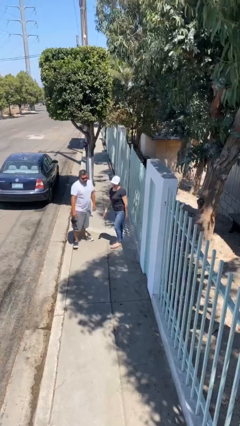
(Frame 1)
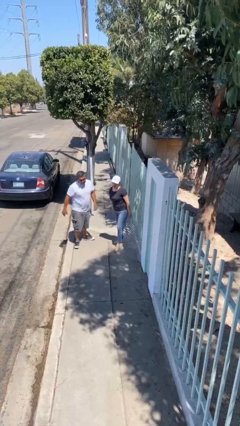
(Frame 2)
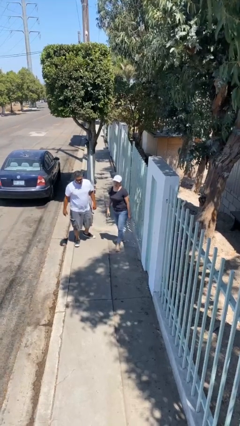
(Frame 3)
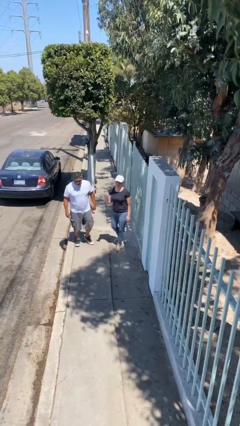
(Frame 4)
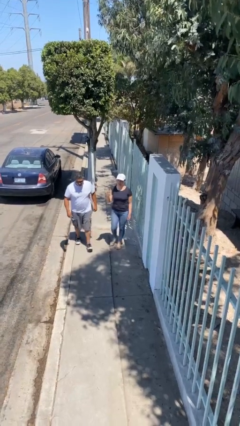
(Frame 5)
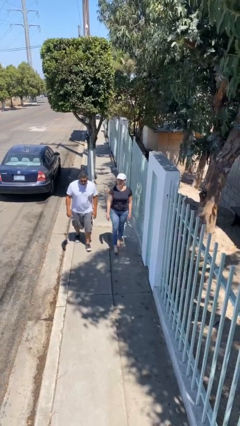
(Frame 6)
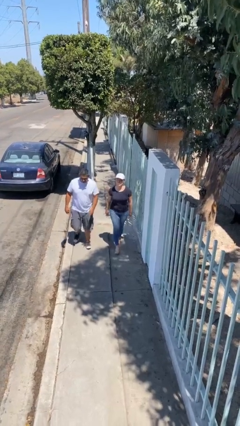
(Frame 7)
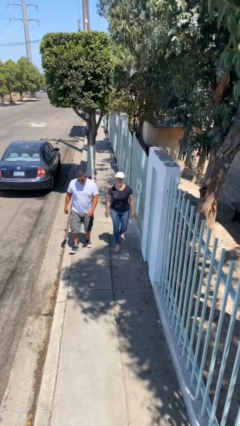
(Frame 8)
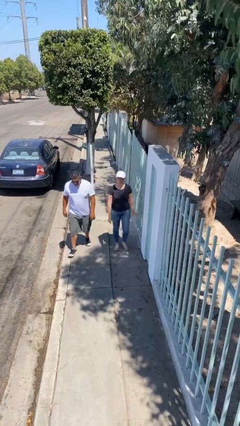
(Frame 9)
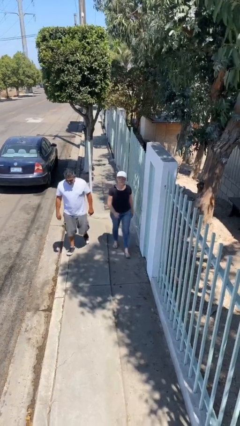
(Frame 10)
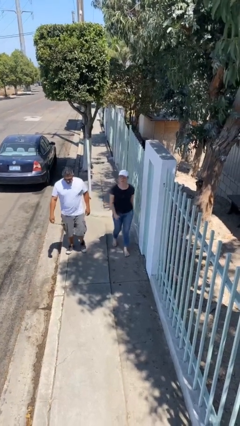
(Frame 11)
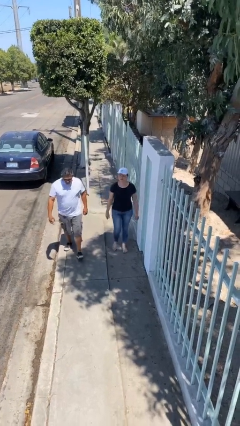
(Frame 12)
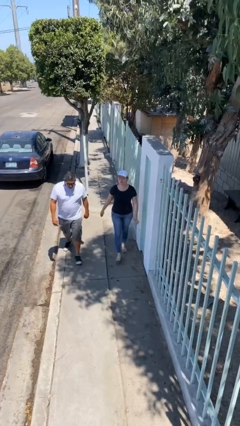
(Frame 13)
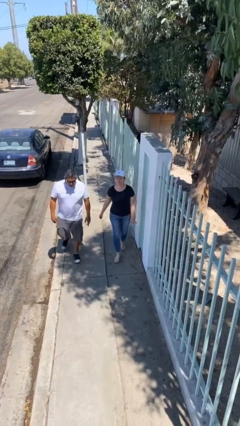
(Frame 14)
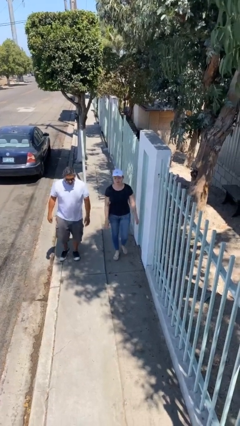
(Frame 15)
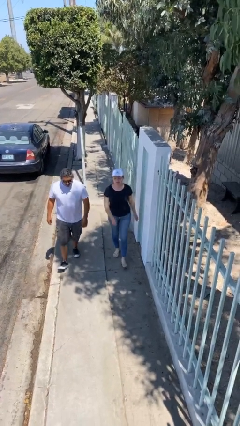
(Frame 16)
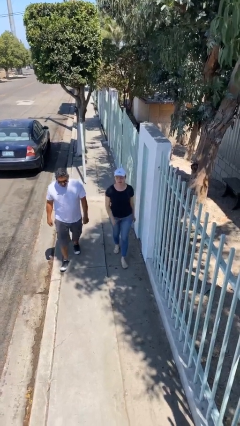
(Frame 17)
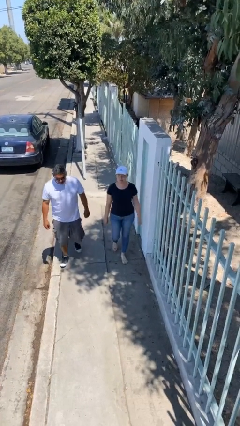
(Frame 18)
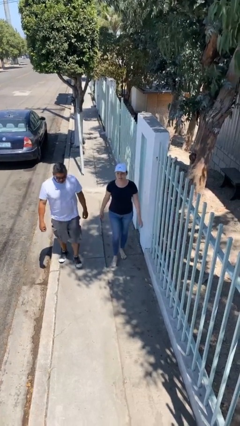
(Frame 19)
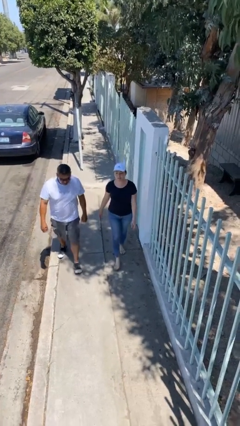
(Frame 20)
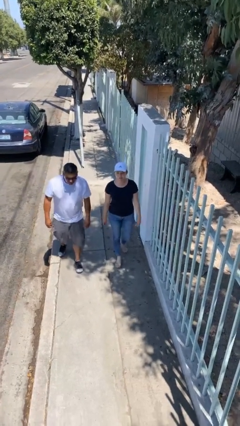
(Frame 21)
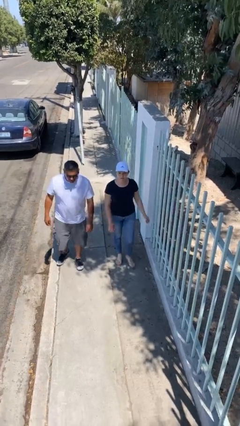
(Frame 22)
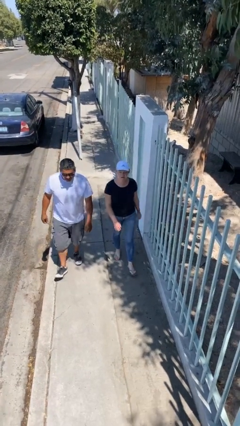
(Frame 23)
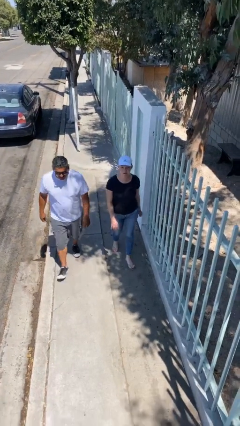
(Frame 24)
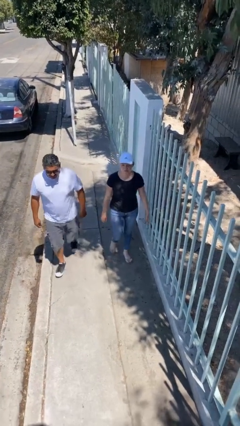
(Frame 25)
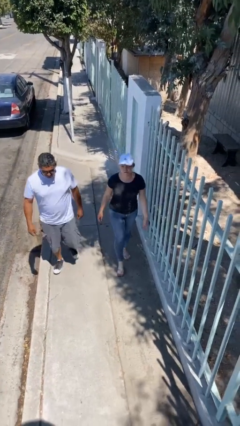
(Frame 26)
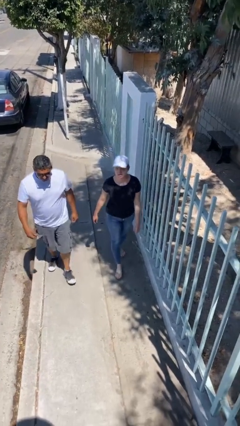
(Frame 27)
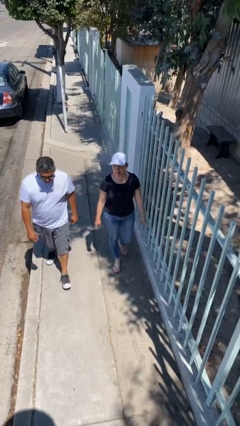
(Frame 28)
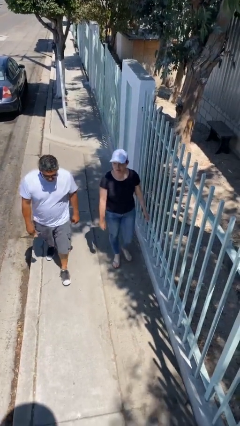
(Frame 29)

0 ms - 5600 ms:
person talks to person

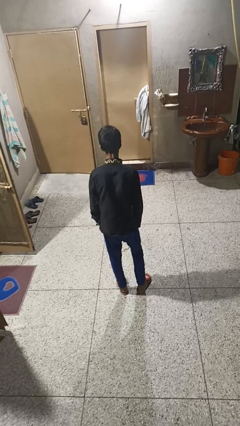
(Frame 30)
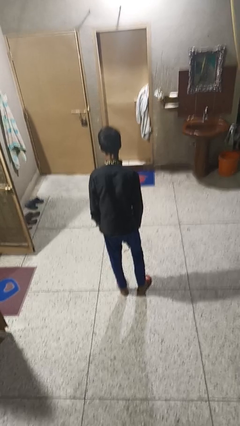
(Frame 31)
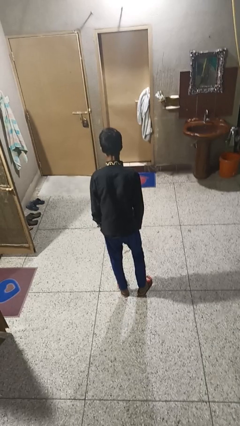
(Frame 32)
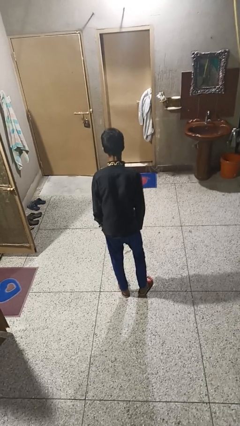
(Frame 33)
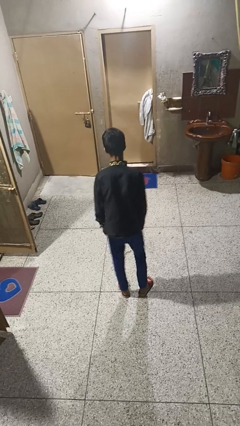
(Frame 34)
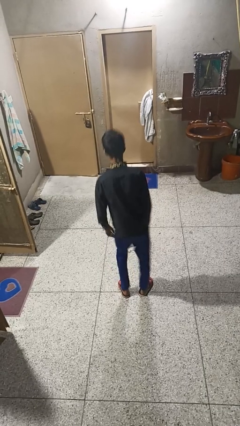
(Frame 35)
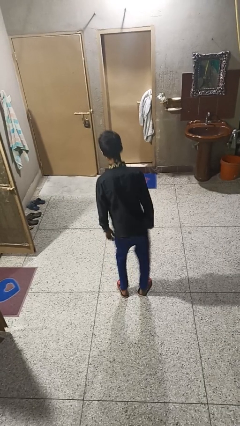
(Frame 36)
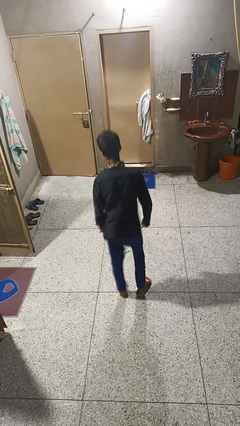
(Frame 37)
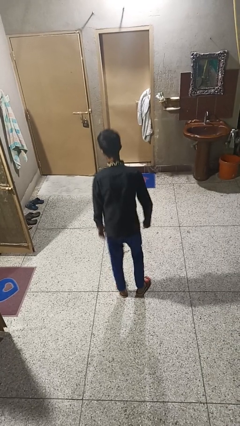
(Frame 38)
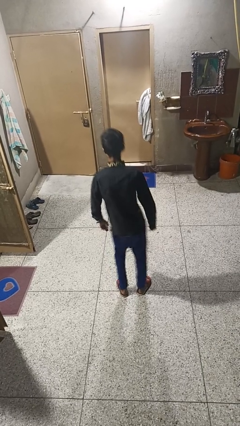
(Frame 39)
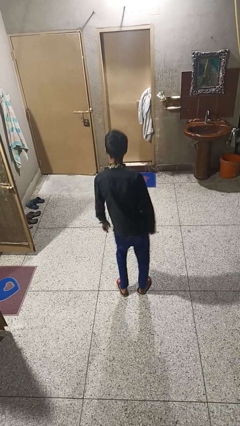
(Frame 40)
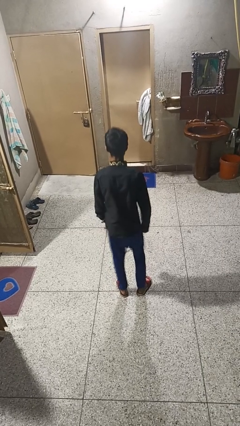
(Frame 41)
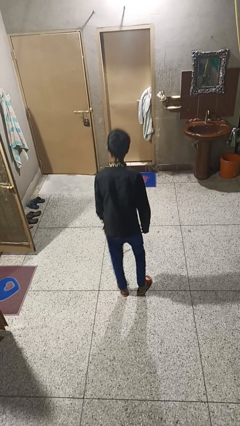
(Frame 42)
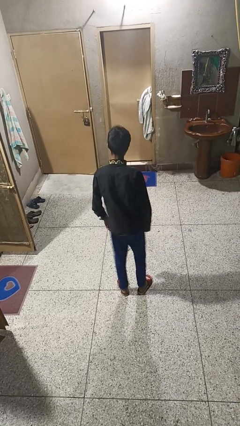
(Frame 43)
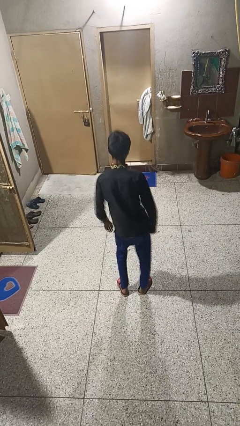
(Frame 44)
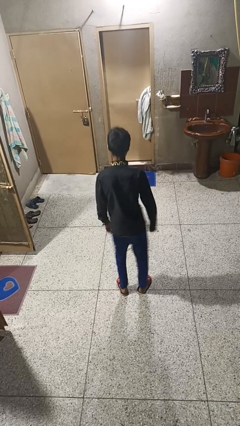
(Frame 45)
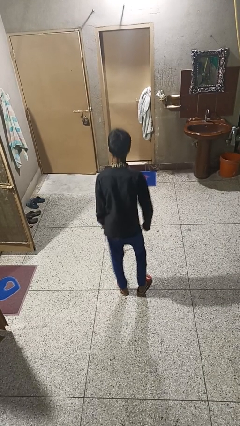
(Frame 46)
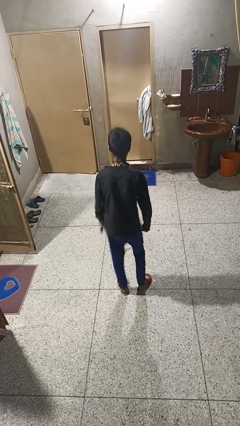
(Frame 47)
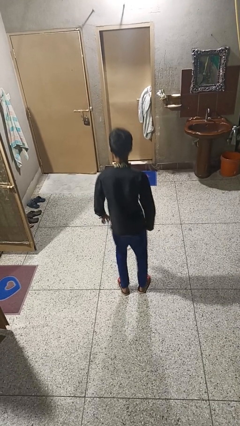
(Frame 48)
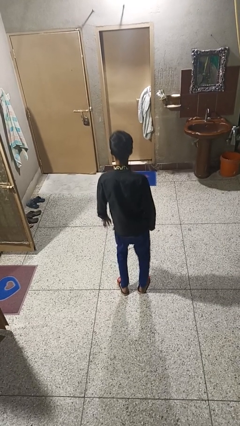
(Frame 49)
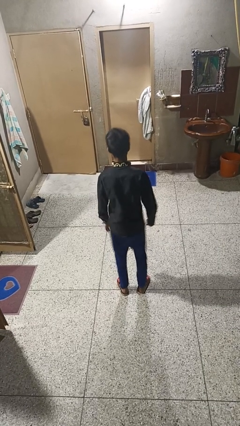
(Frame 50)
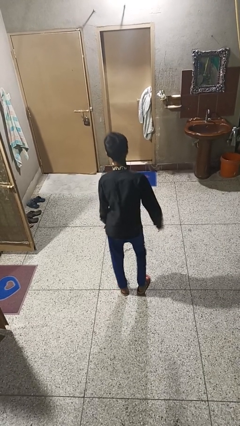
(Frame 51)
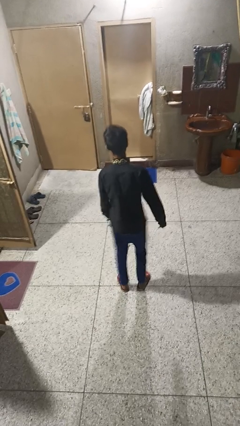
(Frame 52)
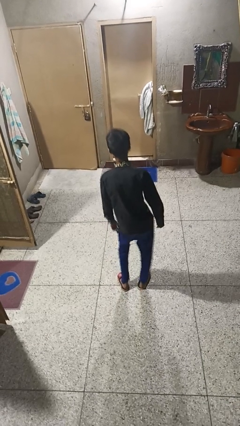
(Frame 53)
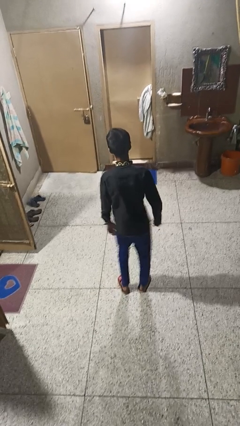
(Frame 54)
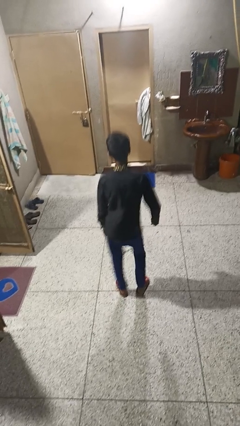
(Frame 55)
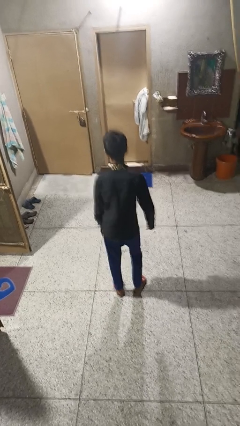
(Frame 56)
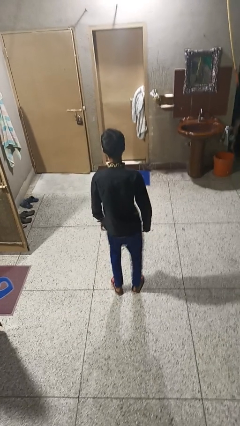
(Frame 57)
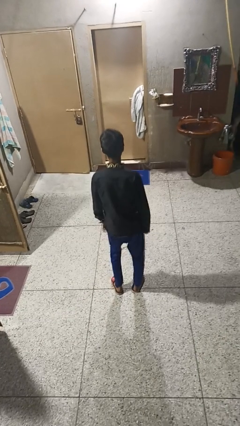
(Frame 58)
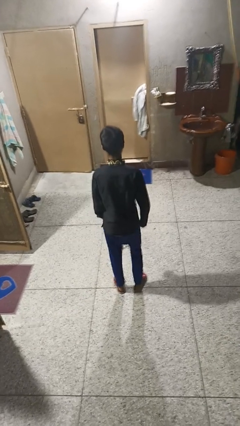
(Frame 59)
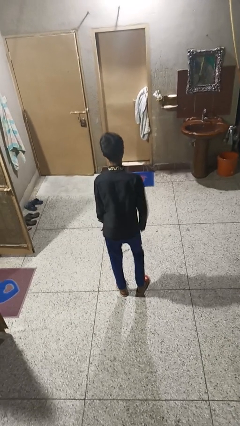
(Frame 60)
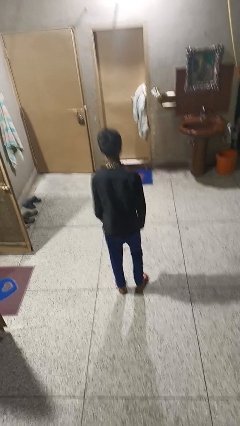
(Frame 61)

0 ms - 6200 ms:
person wiggles hips

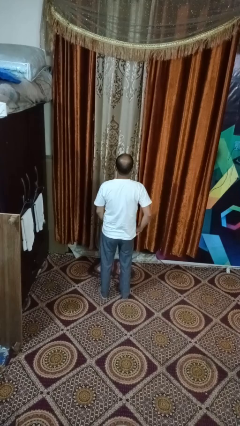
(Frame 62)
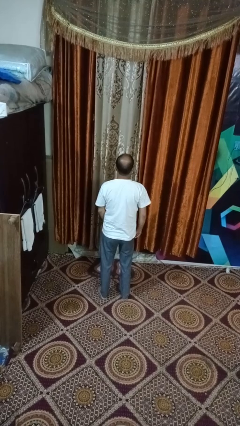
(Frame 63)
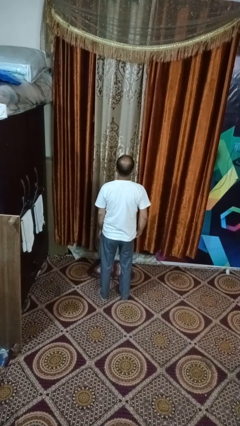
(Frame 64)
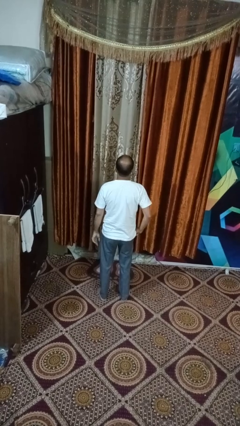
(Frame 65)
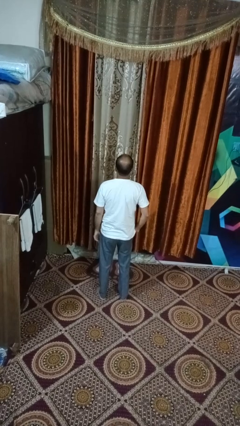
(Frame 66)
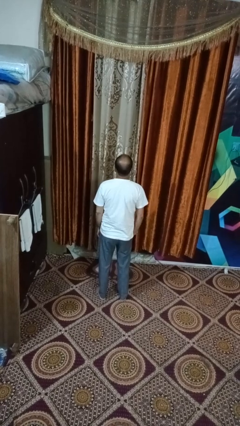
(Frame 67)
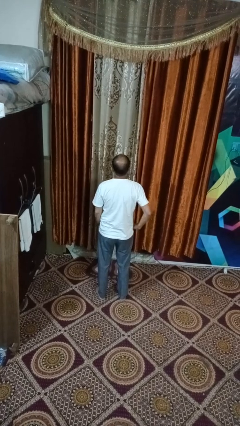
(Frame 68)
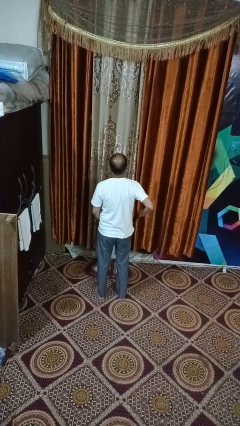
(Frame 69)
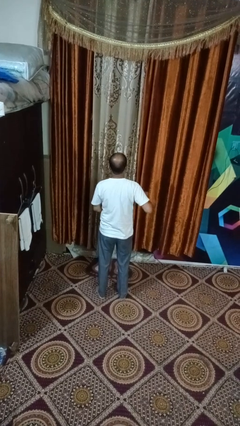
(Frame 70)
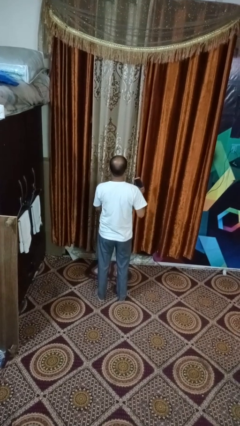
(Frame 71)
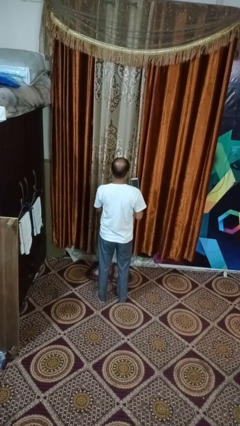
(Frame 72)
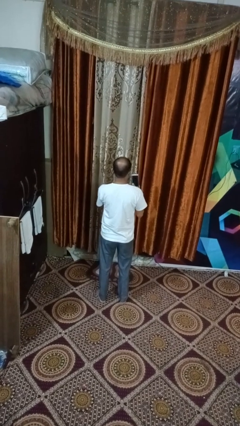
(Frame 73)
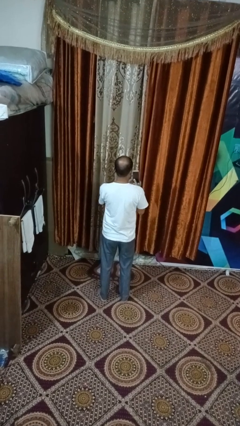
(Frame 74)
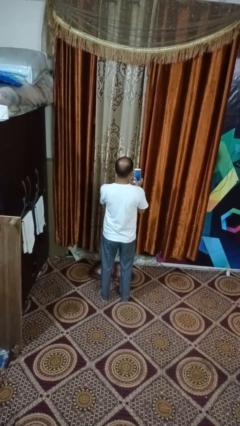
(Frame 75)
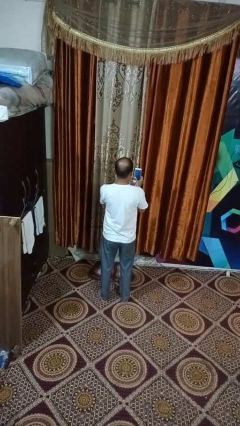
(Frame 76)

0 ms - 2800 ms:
person takes phone from pocket

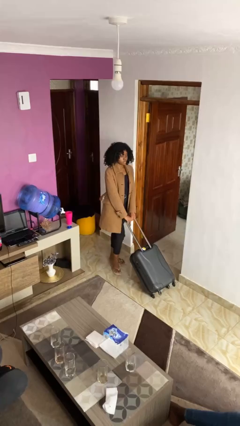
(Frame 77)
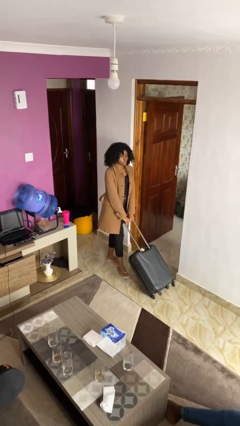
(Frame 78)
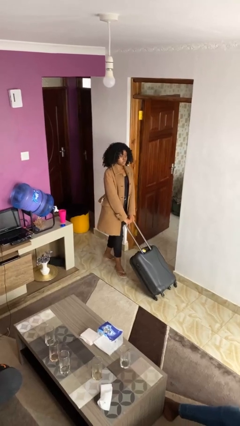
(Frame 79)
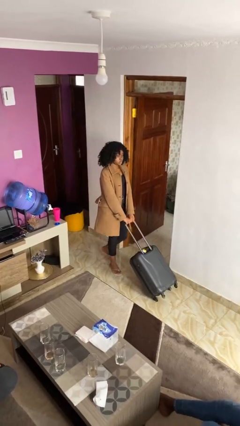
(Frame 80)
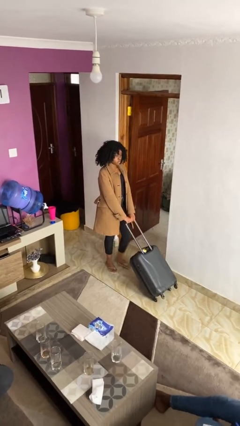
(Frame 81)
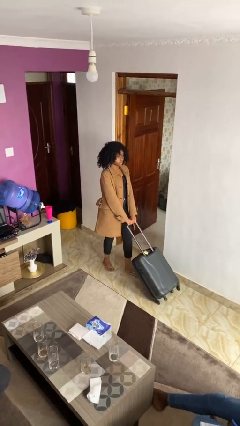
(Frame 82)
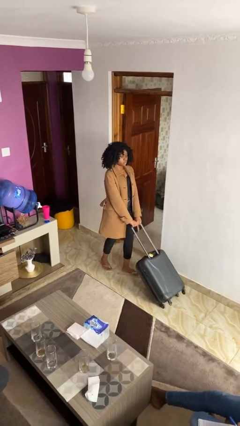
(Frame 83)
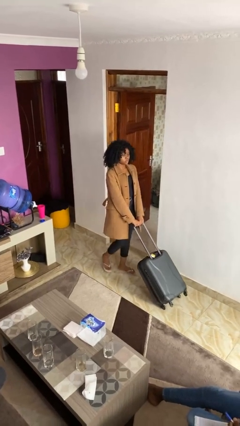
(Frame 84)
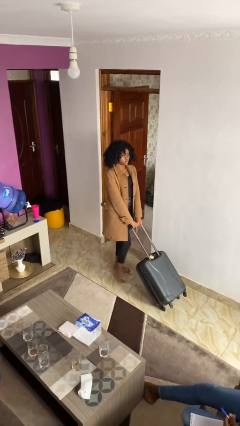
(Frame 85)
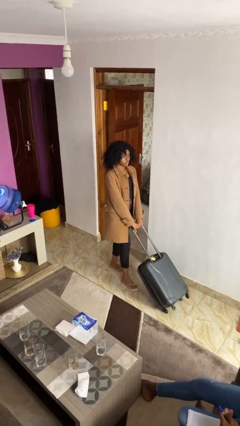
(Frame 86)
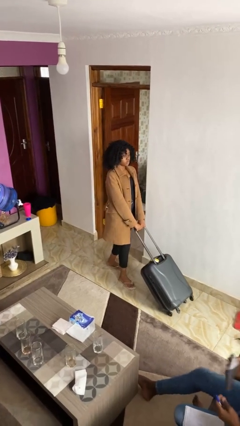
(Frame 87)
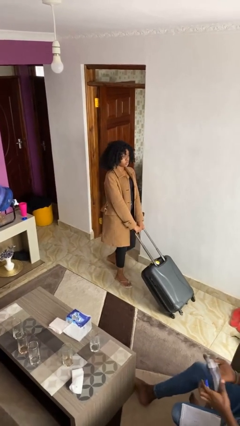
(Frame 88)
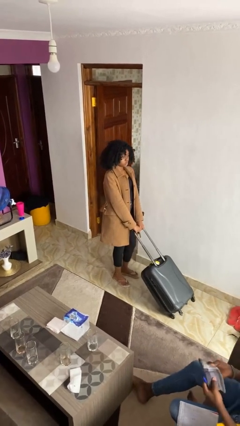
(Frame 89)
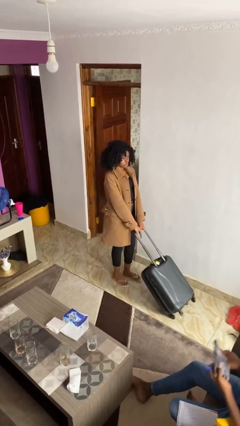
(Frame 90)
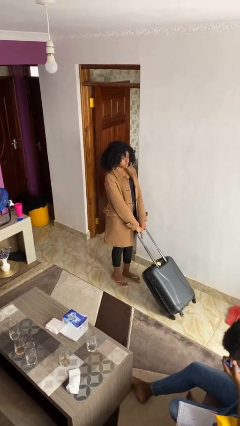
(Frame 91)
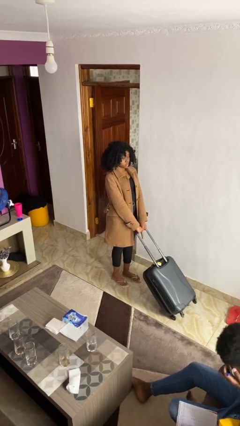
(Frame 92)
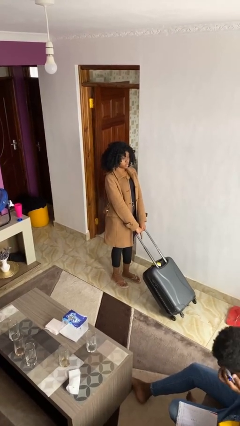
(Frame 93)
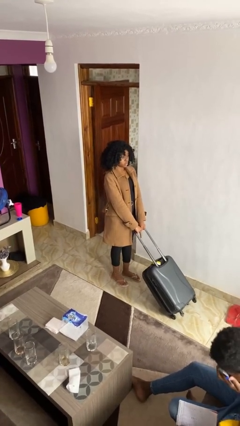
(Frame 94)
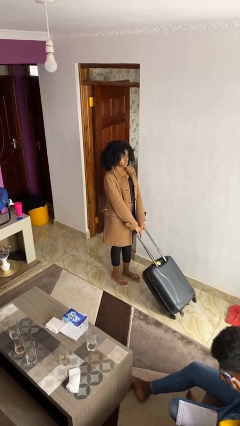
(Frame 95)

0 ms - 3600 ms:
person pushes wheeled cart
